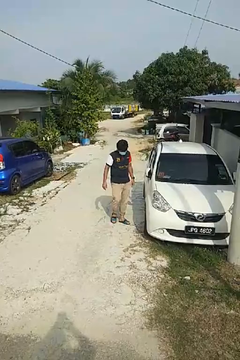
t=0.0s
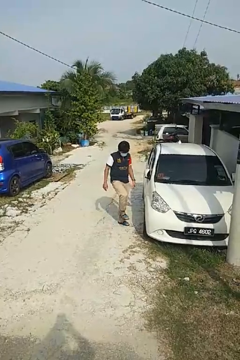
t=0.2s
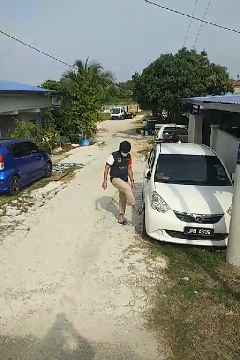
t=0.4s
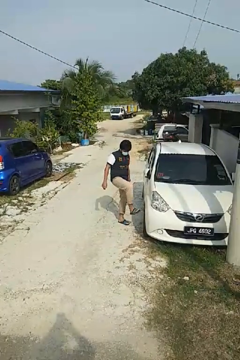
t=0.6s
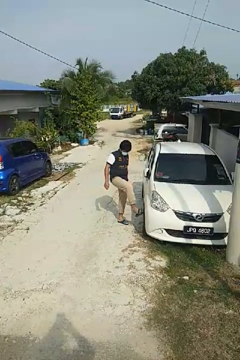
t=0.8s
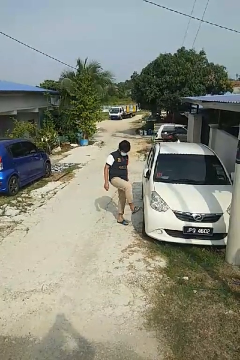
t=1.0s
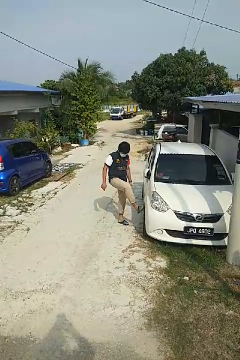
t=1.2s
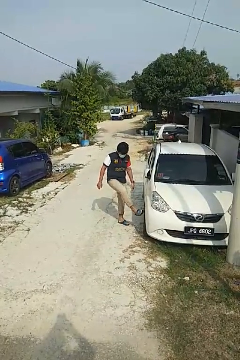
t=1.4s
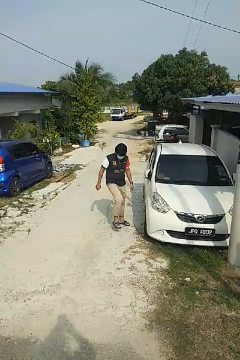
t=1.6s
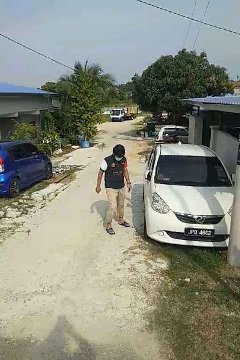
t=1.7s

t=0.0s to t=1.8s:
person kicks car tires

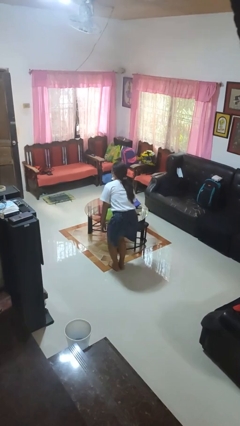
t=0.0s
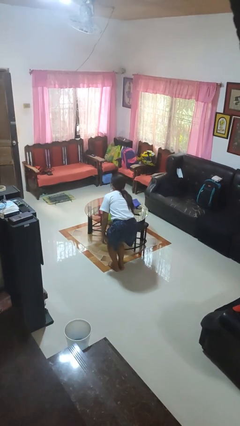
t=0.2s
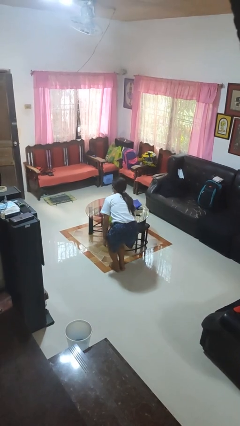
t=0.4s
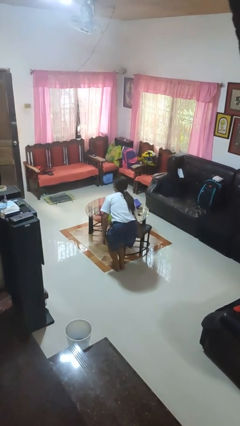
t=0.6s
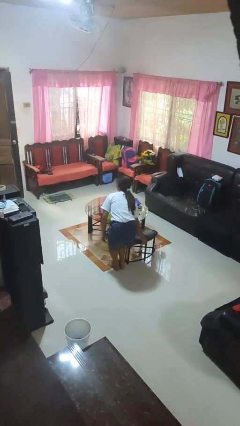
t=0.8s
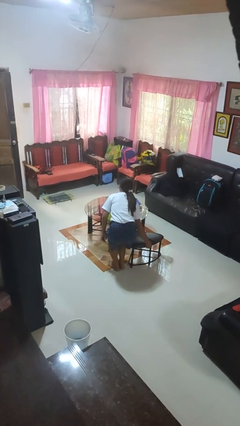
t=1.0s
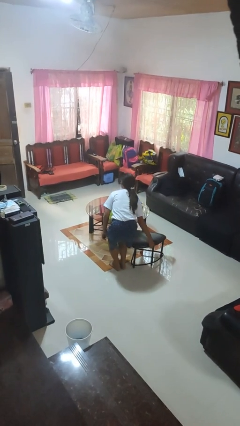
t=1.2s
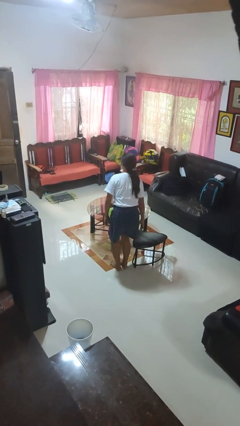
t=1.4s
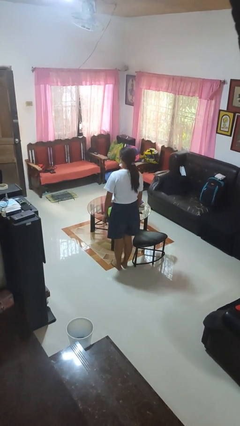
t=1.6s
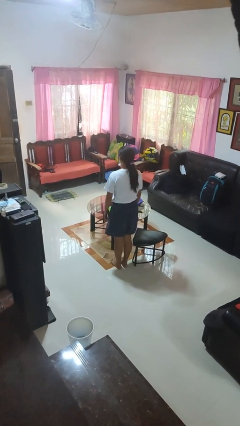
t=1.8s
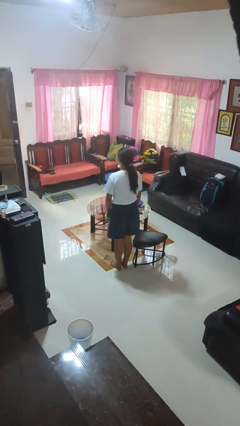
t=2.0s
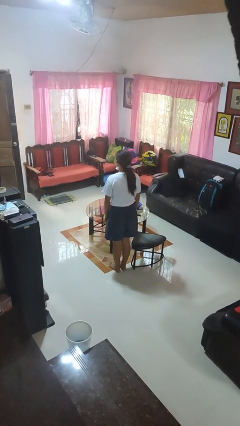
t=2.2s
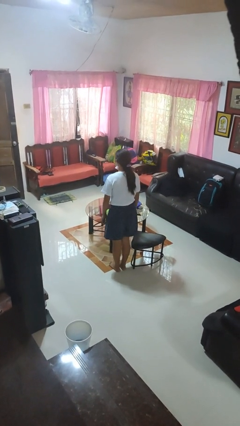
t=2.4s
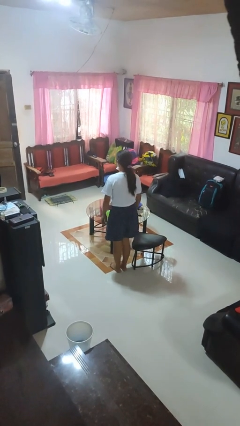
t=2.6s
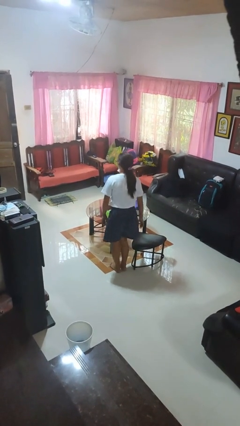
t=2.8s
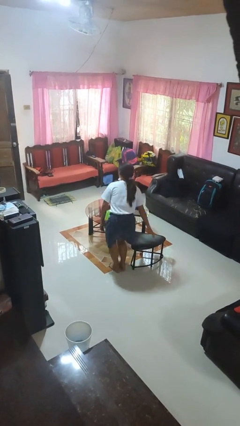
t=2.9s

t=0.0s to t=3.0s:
person pulls out chair

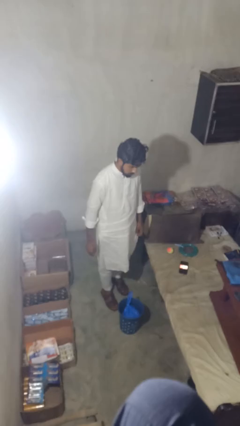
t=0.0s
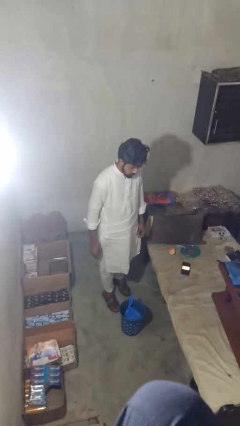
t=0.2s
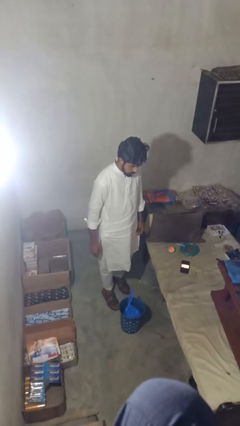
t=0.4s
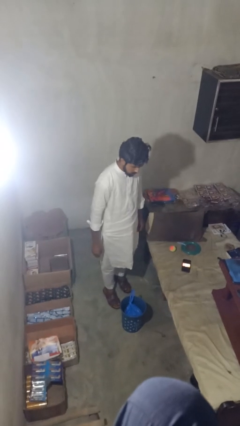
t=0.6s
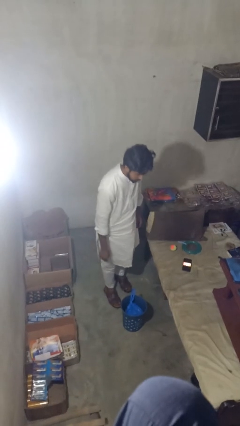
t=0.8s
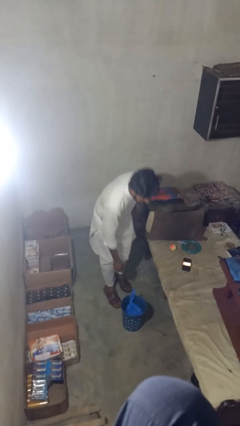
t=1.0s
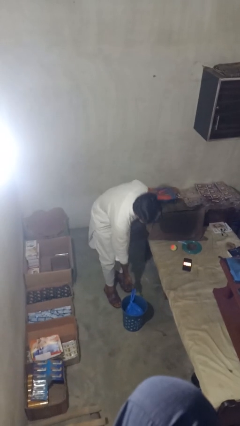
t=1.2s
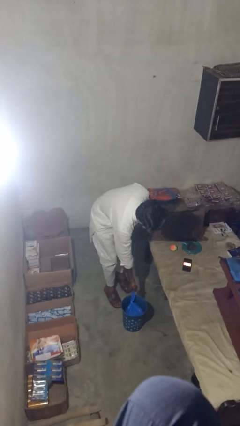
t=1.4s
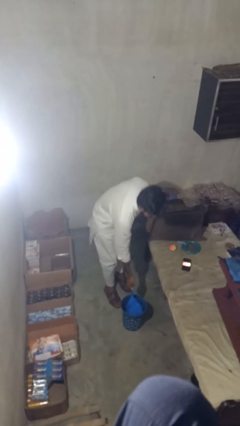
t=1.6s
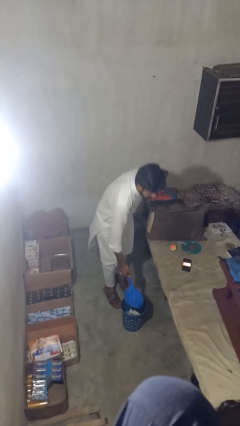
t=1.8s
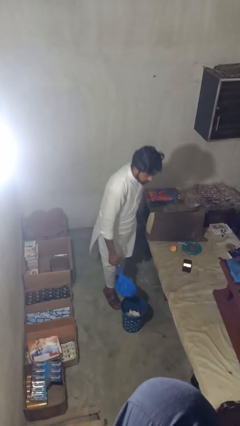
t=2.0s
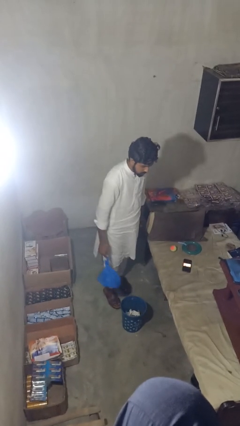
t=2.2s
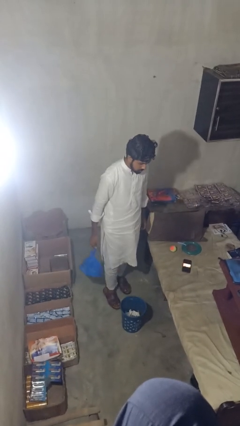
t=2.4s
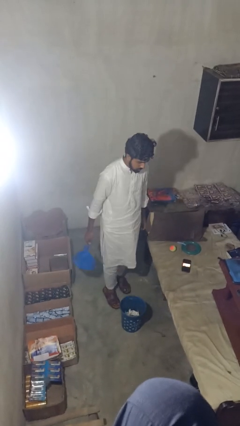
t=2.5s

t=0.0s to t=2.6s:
person takes object from basket

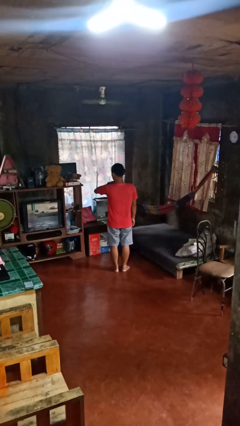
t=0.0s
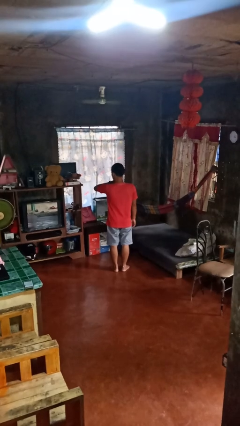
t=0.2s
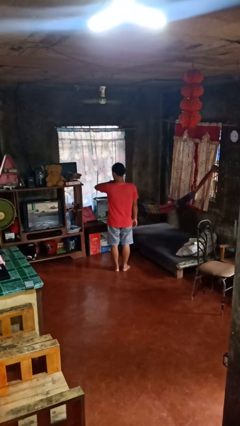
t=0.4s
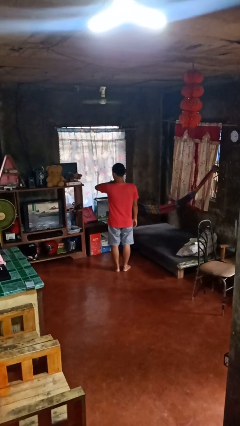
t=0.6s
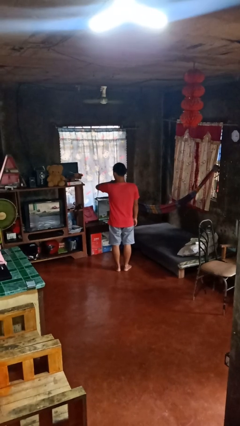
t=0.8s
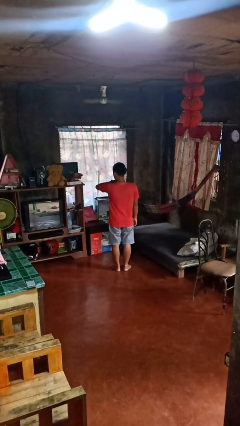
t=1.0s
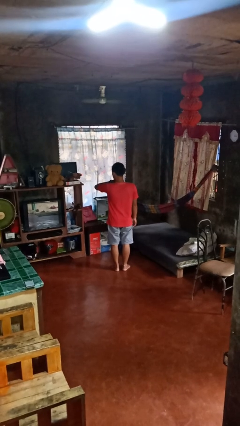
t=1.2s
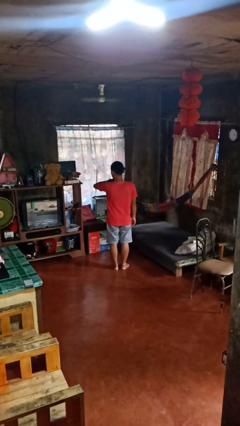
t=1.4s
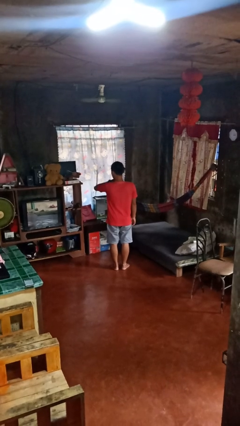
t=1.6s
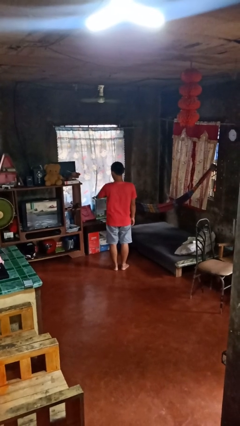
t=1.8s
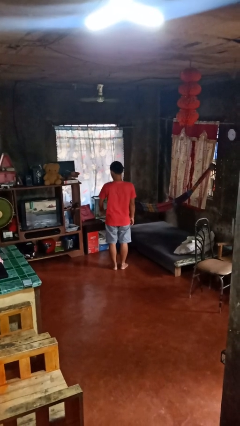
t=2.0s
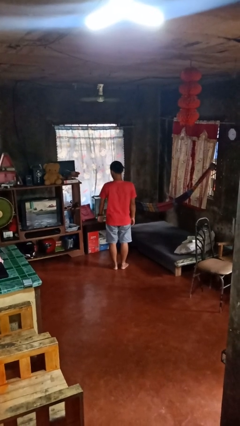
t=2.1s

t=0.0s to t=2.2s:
person looks at wristwatch

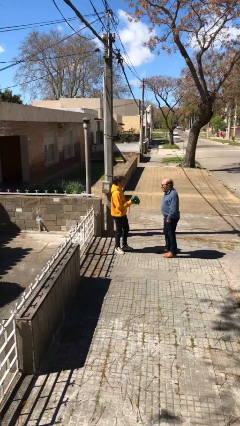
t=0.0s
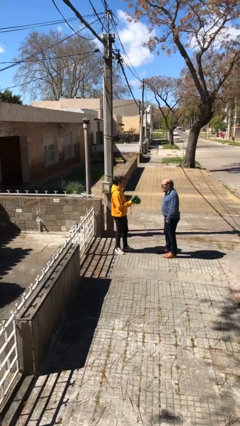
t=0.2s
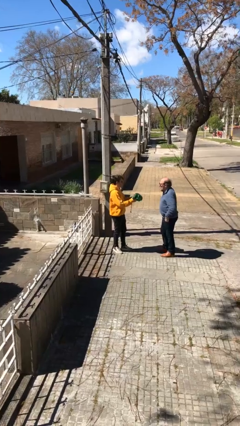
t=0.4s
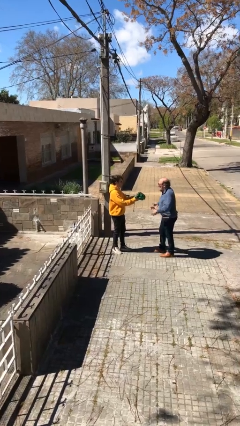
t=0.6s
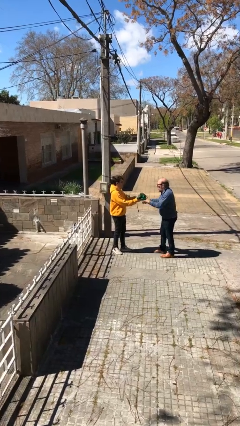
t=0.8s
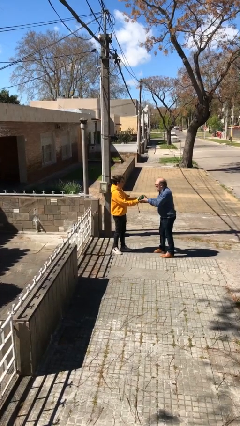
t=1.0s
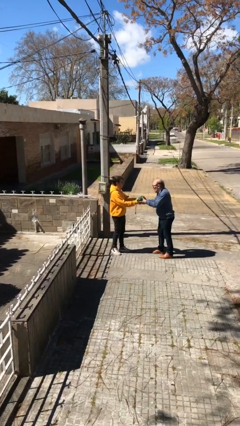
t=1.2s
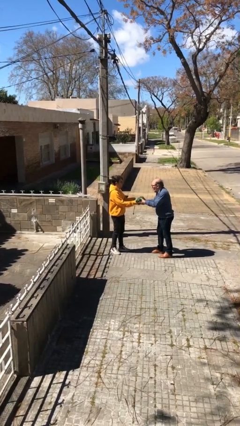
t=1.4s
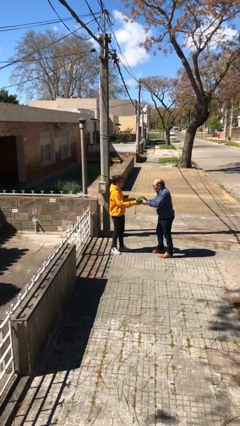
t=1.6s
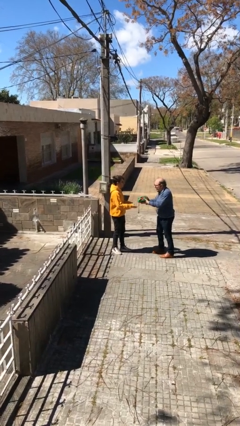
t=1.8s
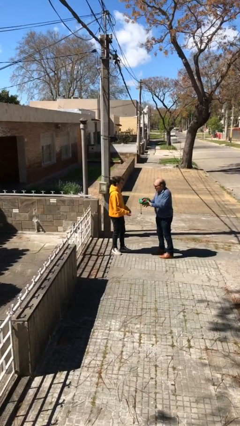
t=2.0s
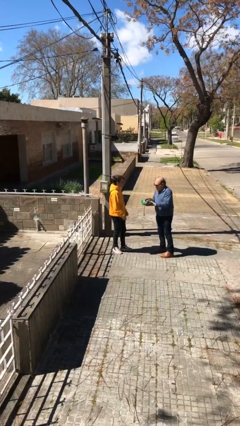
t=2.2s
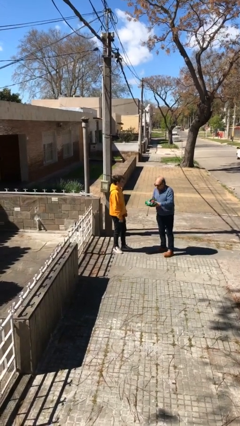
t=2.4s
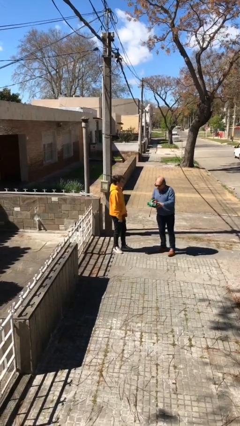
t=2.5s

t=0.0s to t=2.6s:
person transfers object to person

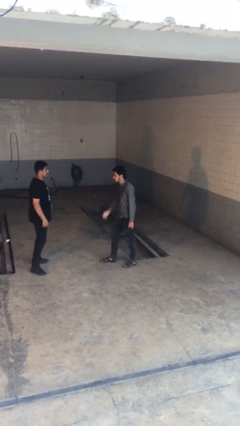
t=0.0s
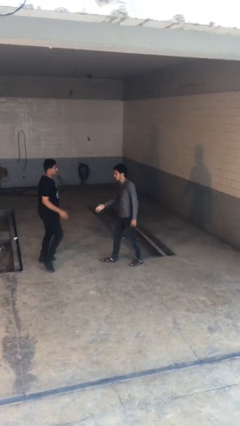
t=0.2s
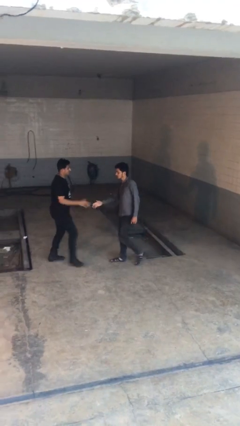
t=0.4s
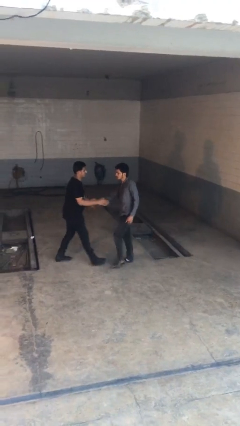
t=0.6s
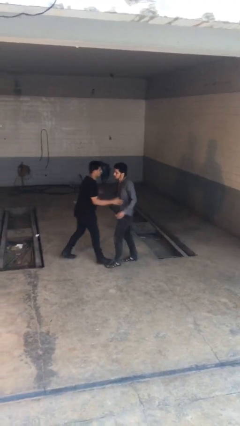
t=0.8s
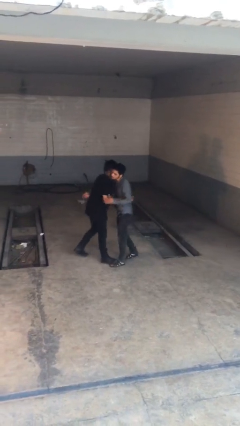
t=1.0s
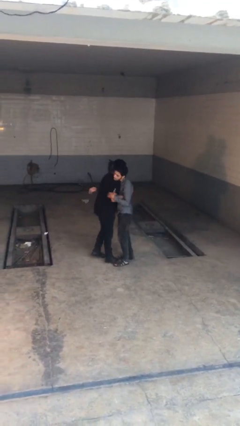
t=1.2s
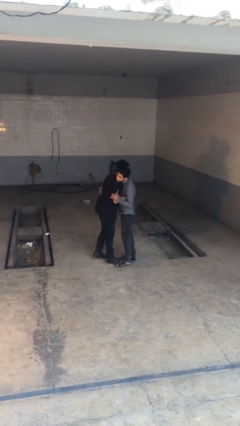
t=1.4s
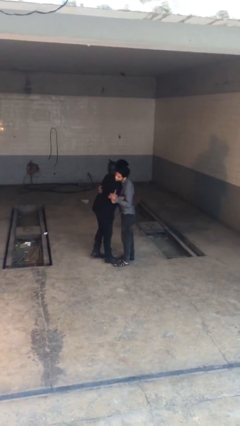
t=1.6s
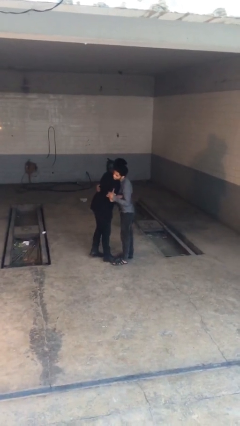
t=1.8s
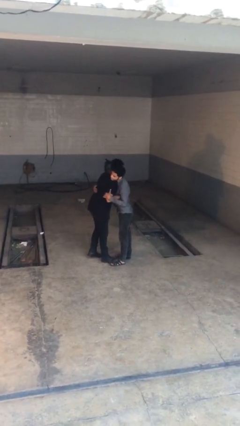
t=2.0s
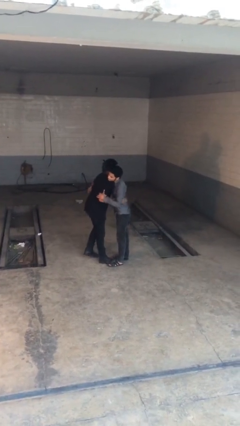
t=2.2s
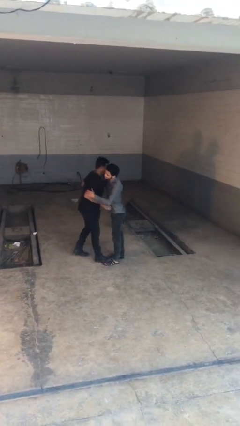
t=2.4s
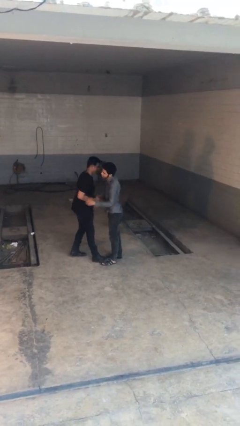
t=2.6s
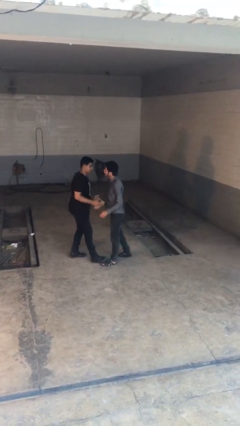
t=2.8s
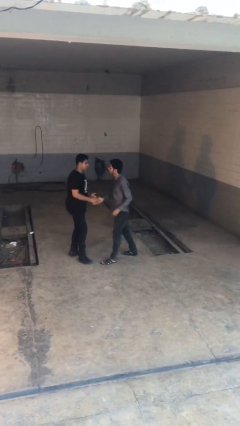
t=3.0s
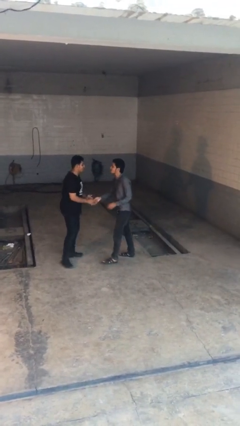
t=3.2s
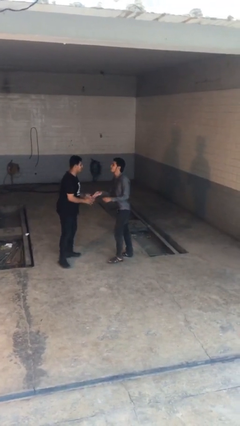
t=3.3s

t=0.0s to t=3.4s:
person embraces person

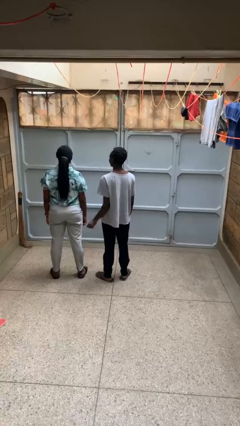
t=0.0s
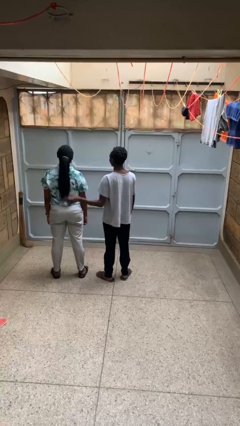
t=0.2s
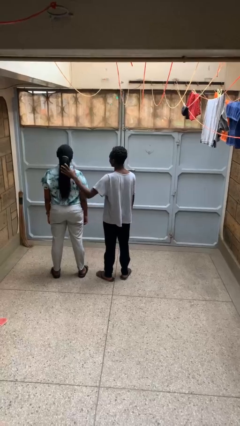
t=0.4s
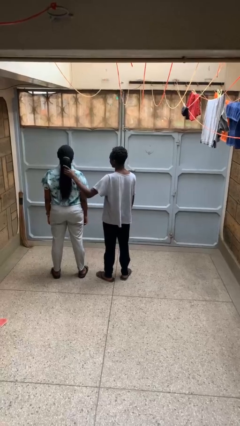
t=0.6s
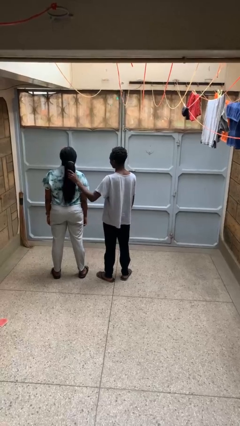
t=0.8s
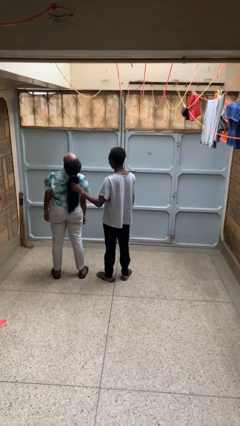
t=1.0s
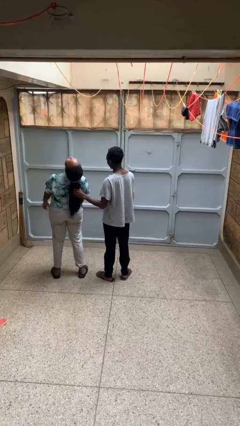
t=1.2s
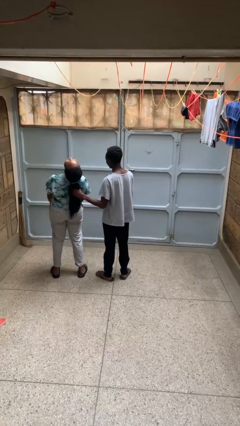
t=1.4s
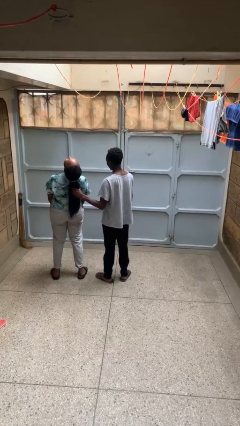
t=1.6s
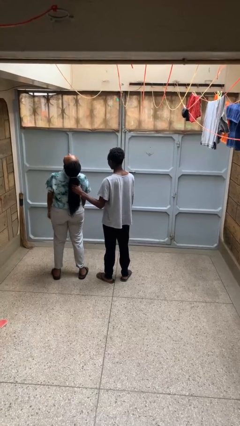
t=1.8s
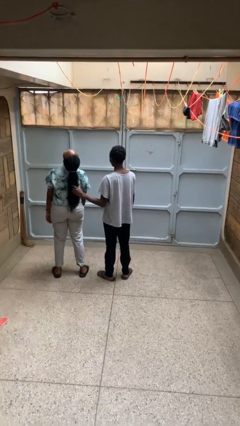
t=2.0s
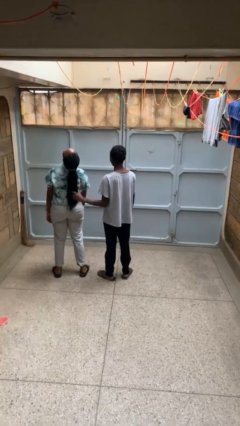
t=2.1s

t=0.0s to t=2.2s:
person grabs person by hair
